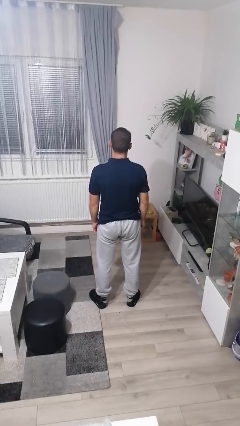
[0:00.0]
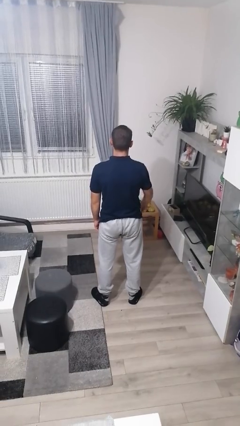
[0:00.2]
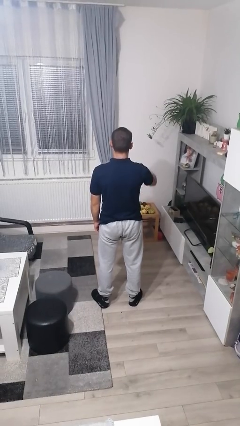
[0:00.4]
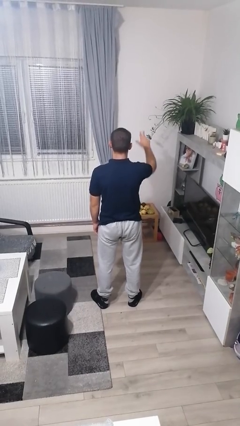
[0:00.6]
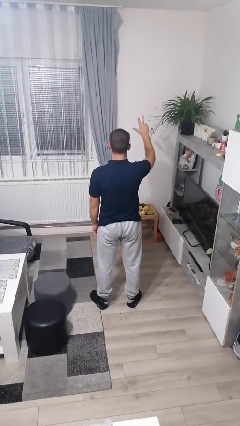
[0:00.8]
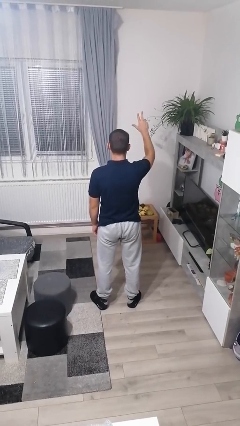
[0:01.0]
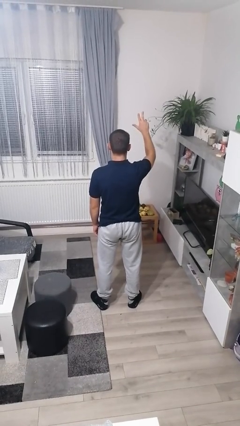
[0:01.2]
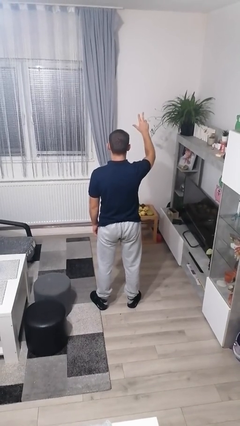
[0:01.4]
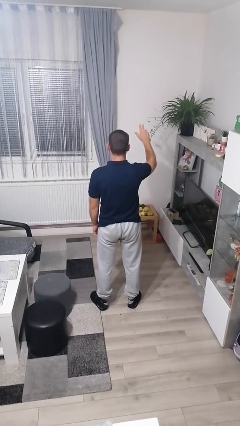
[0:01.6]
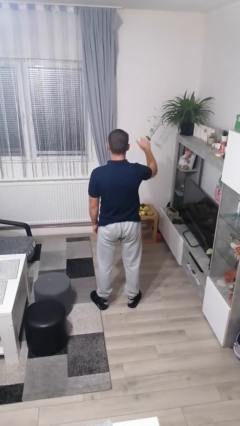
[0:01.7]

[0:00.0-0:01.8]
person gestures number three

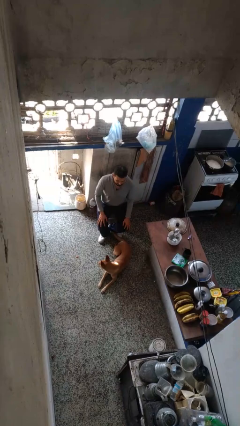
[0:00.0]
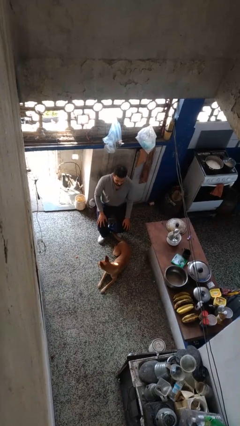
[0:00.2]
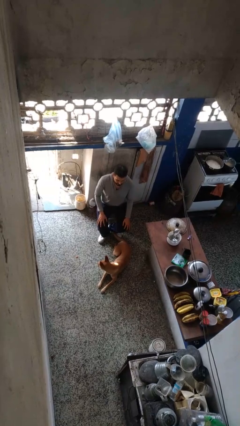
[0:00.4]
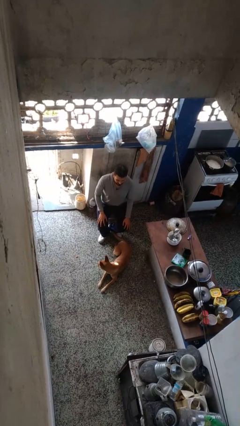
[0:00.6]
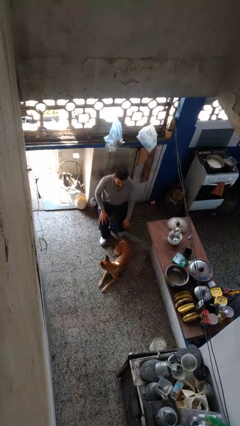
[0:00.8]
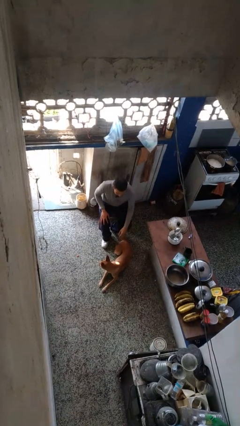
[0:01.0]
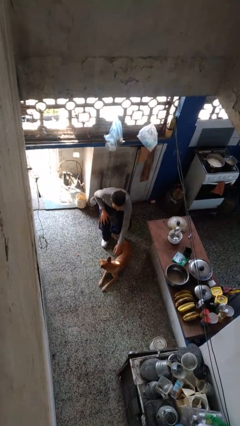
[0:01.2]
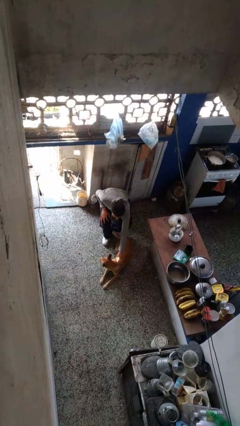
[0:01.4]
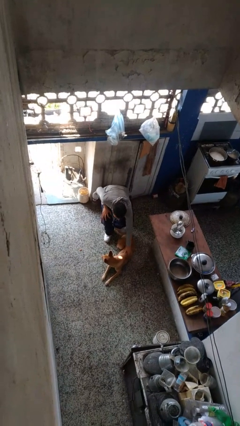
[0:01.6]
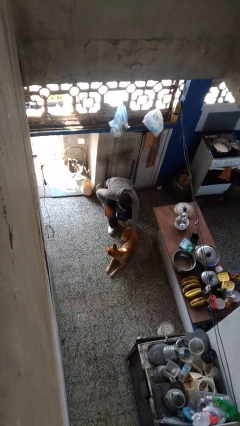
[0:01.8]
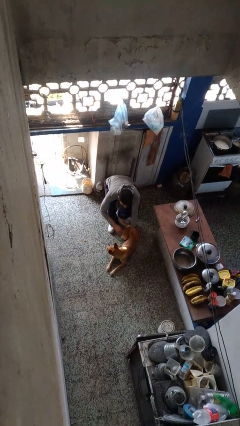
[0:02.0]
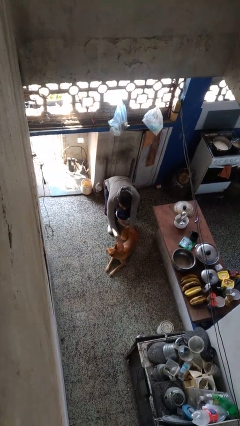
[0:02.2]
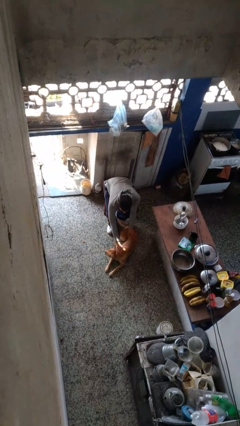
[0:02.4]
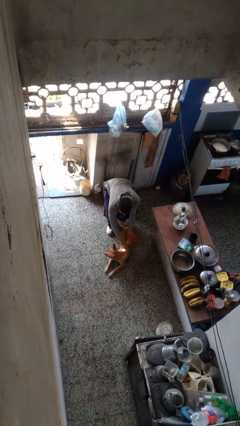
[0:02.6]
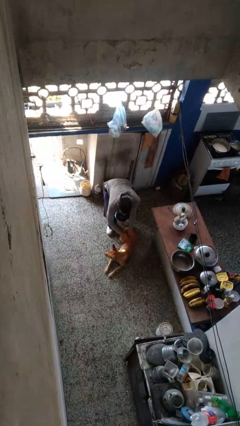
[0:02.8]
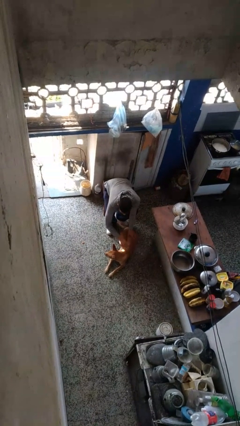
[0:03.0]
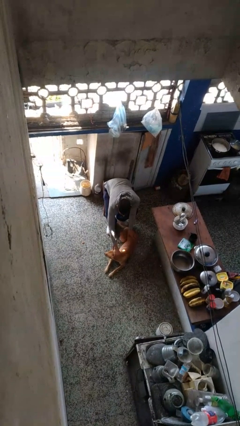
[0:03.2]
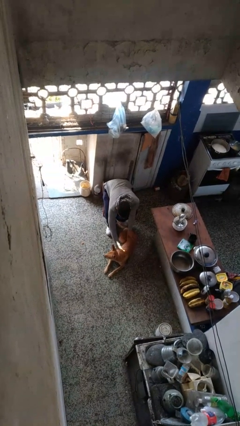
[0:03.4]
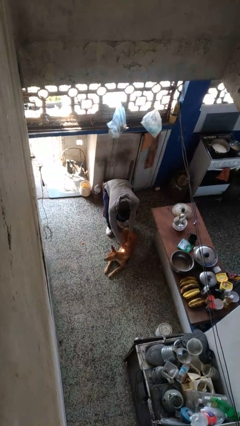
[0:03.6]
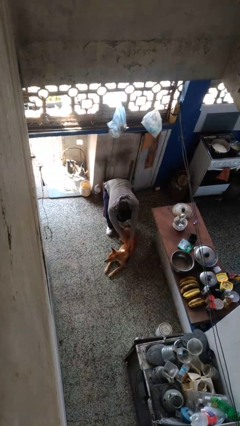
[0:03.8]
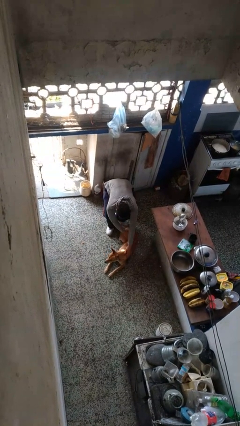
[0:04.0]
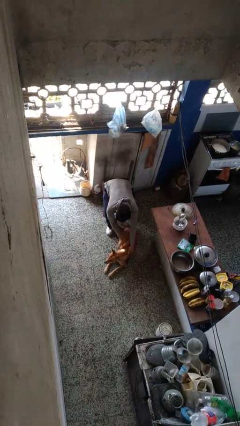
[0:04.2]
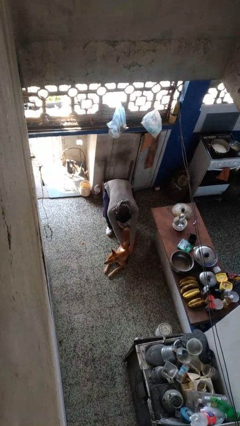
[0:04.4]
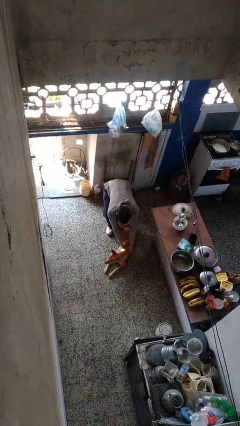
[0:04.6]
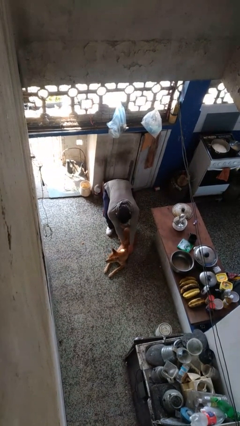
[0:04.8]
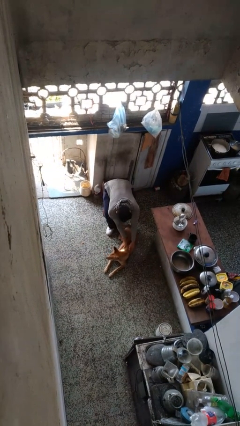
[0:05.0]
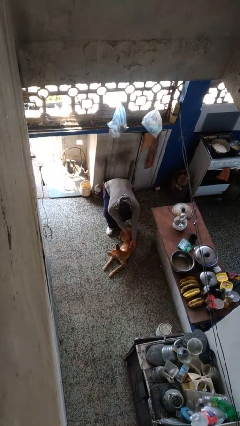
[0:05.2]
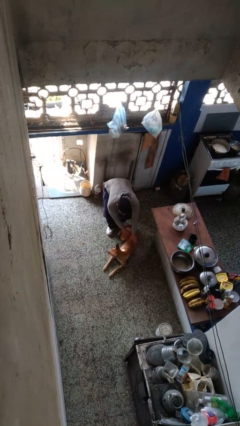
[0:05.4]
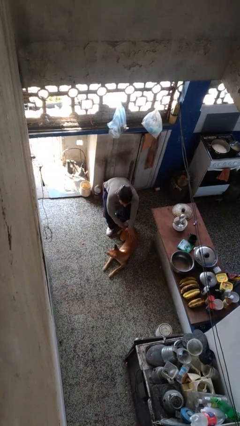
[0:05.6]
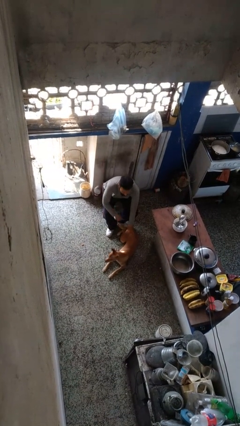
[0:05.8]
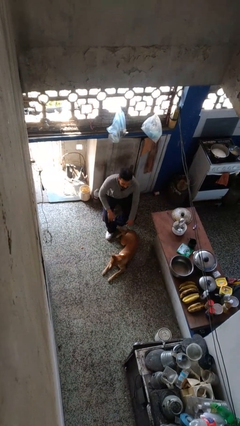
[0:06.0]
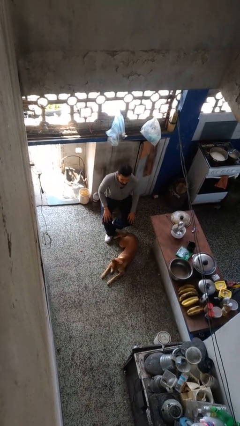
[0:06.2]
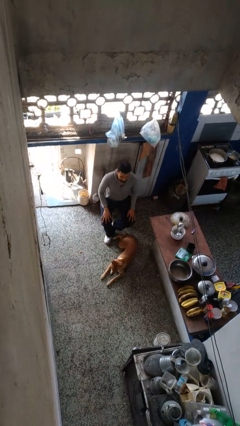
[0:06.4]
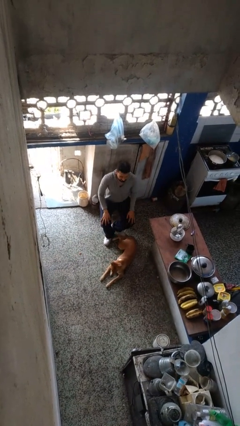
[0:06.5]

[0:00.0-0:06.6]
person pets dog

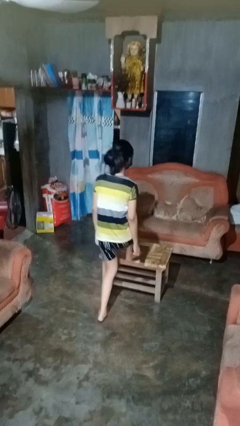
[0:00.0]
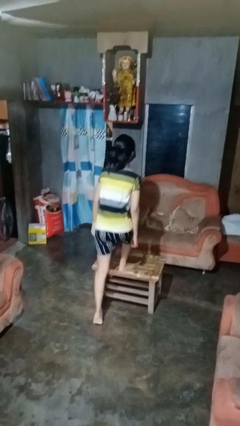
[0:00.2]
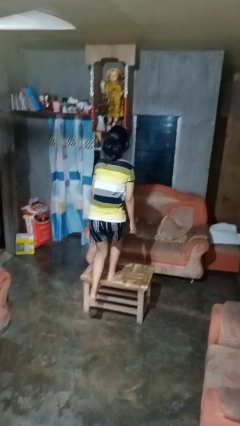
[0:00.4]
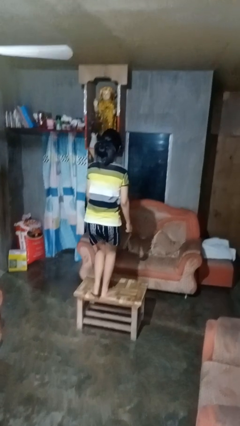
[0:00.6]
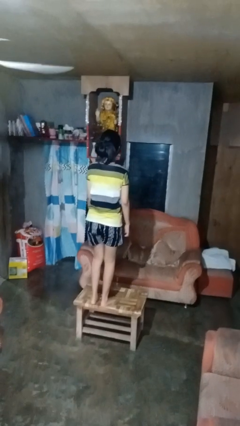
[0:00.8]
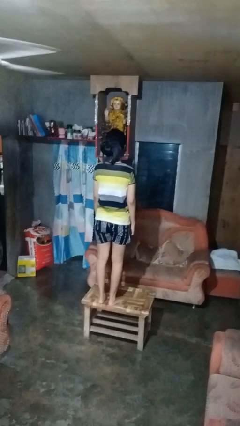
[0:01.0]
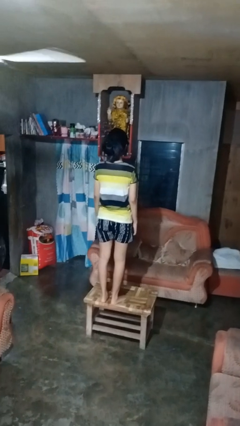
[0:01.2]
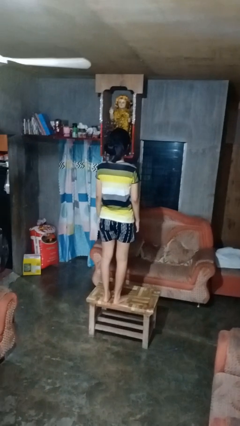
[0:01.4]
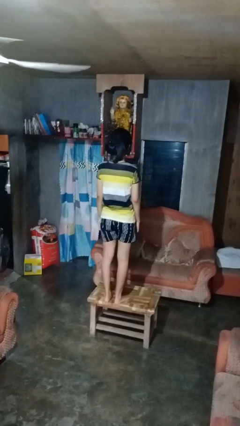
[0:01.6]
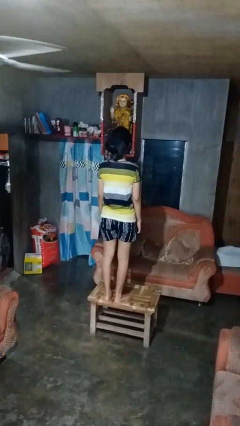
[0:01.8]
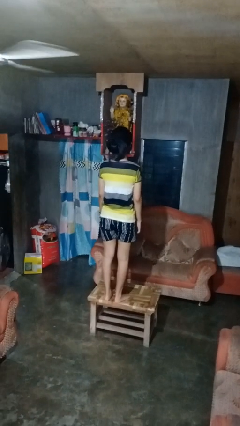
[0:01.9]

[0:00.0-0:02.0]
person climbs on table

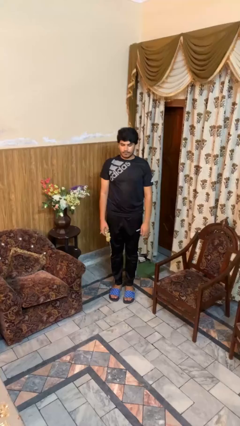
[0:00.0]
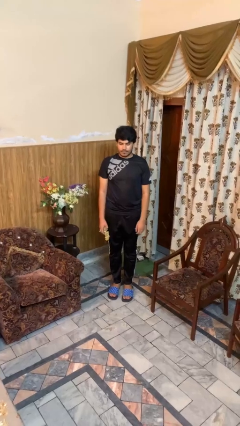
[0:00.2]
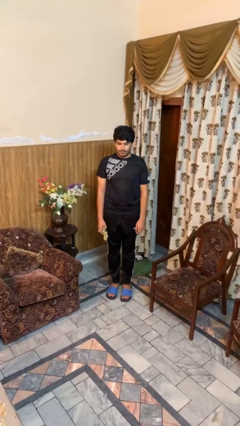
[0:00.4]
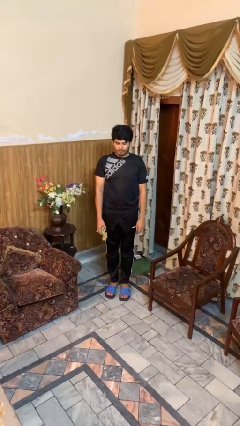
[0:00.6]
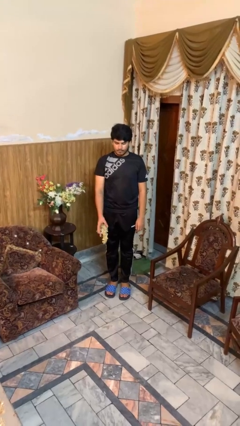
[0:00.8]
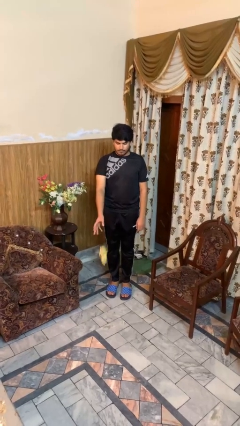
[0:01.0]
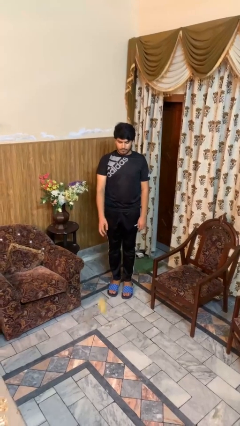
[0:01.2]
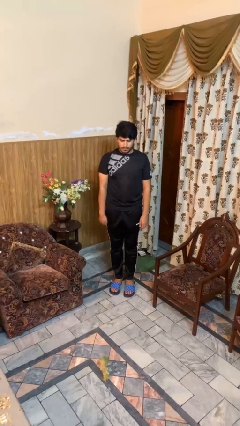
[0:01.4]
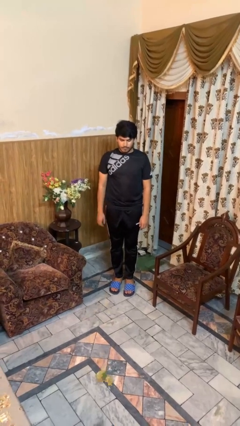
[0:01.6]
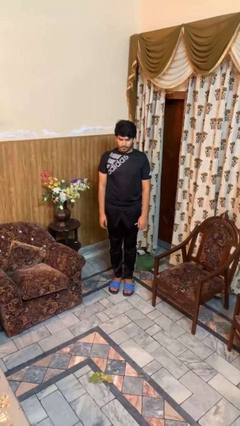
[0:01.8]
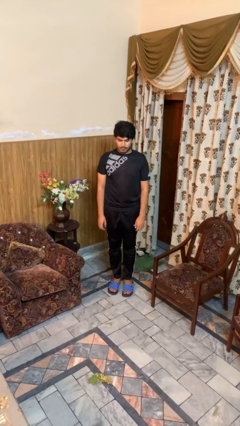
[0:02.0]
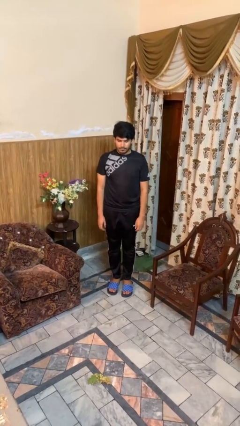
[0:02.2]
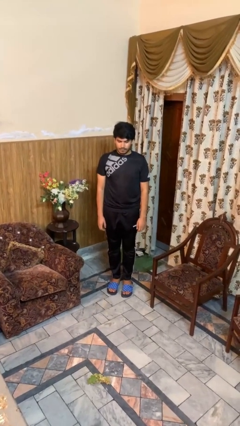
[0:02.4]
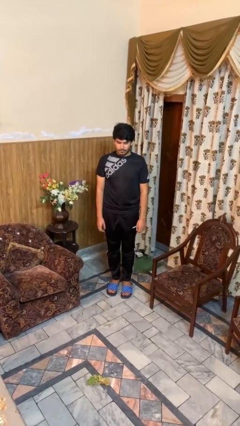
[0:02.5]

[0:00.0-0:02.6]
person throws object to ground

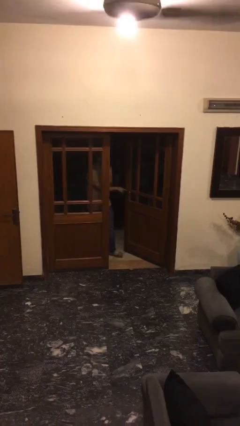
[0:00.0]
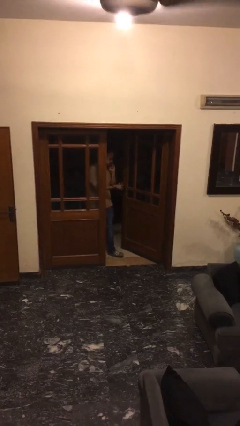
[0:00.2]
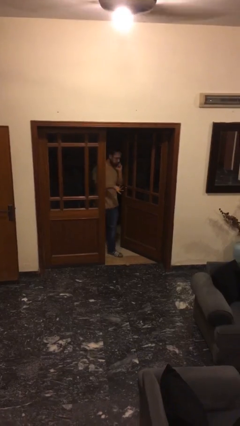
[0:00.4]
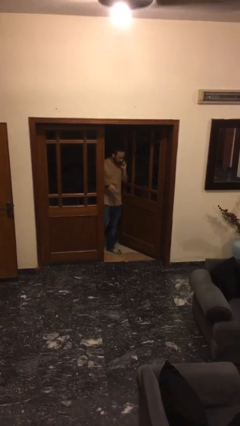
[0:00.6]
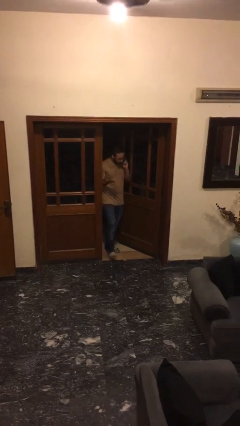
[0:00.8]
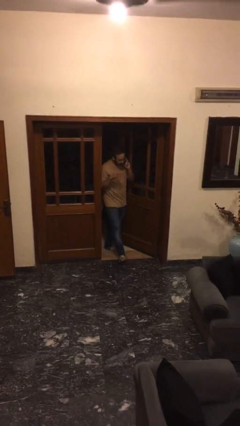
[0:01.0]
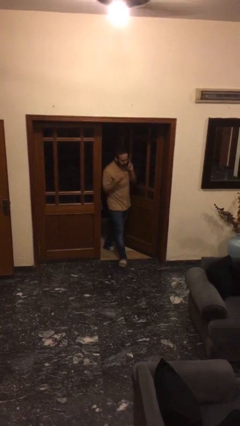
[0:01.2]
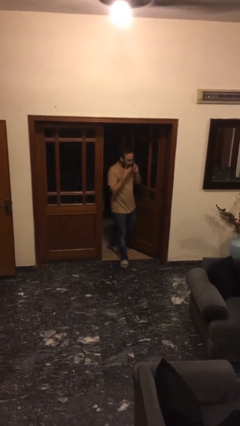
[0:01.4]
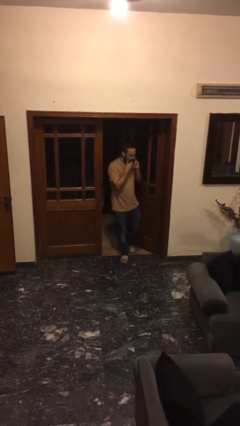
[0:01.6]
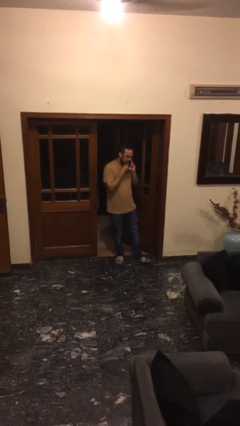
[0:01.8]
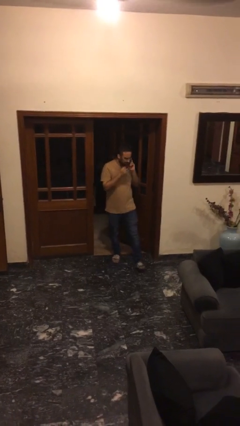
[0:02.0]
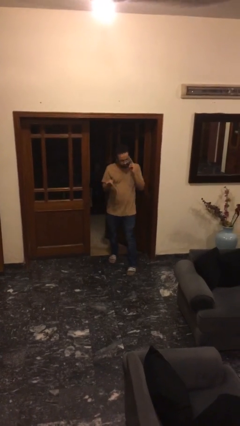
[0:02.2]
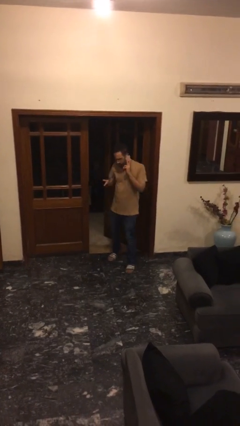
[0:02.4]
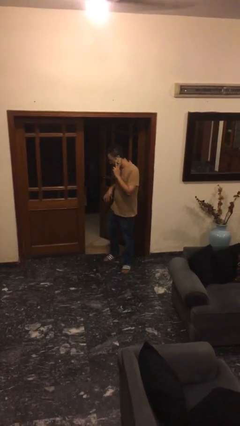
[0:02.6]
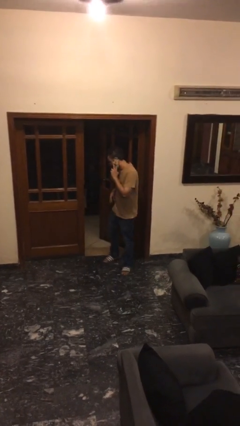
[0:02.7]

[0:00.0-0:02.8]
person enters scene through structure

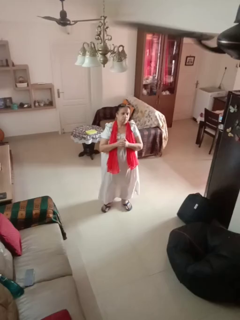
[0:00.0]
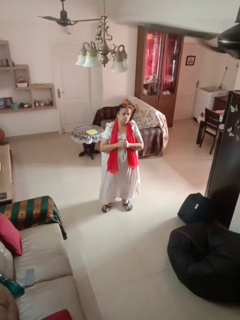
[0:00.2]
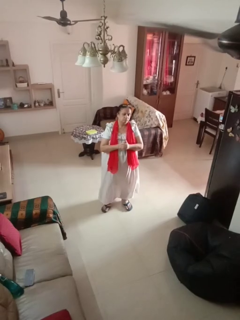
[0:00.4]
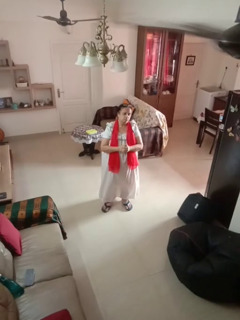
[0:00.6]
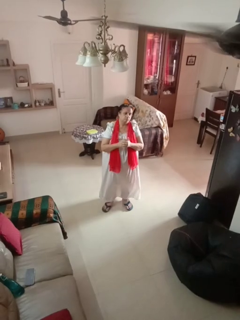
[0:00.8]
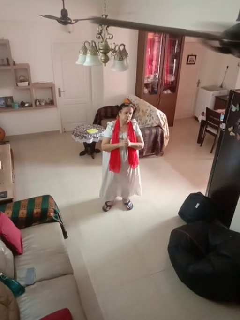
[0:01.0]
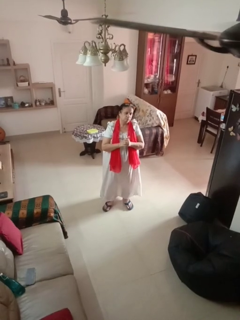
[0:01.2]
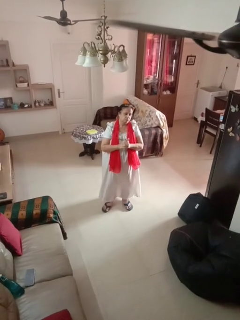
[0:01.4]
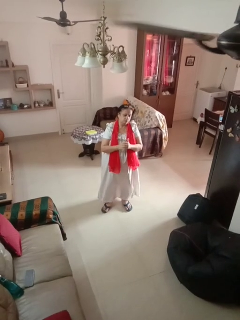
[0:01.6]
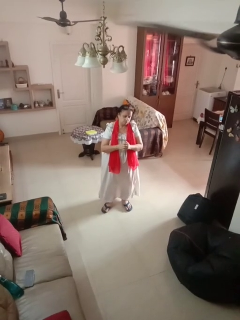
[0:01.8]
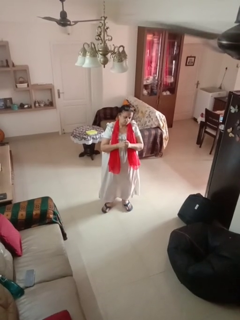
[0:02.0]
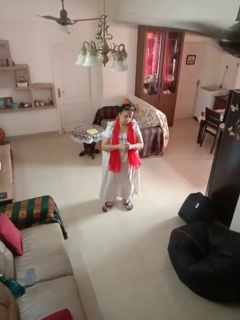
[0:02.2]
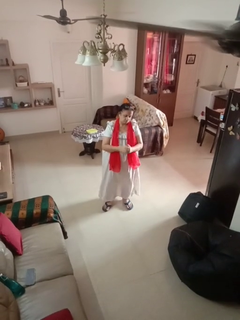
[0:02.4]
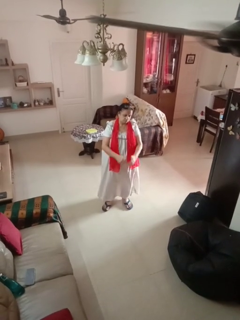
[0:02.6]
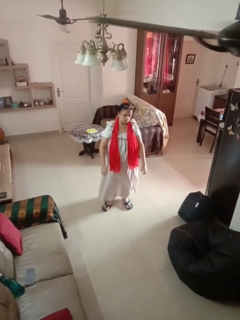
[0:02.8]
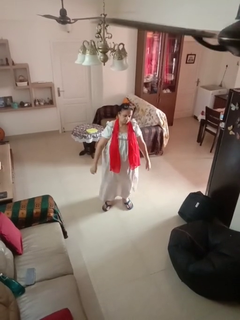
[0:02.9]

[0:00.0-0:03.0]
person cracks knuckles
